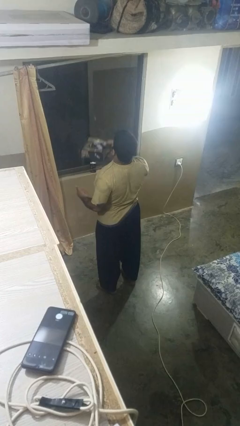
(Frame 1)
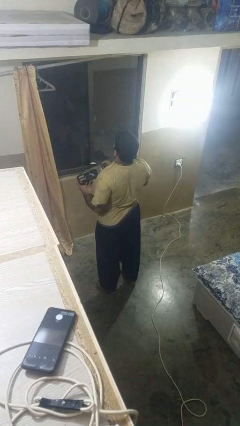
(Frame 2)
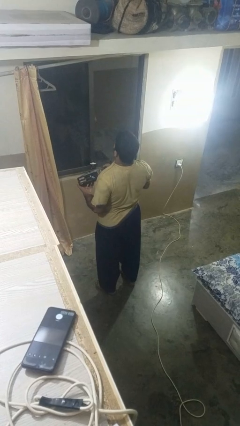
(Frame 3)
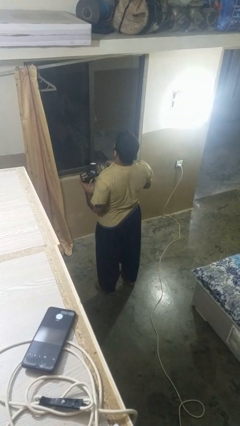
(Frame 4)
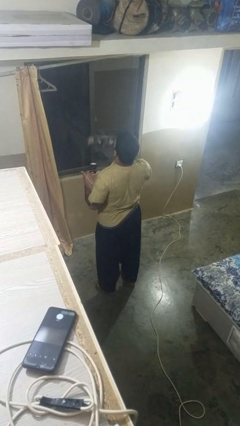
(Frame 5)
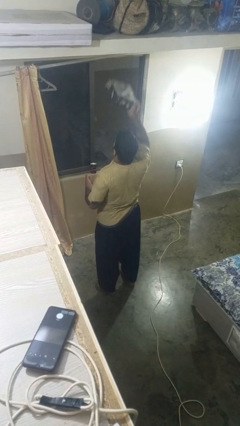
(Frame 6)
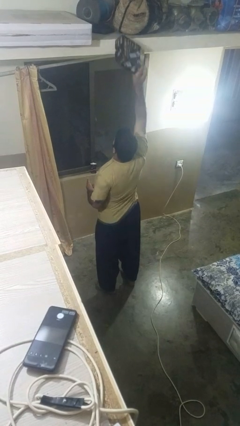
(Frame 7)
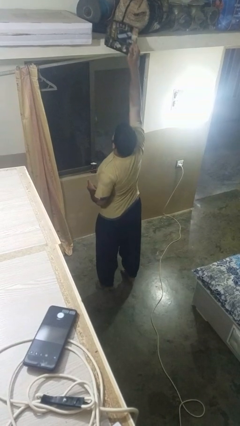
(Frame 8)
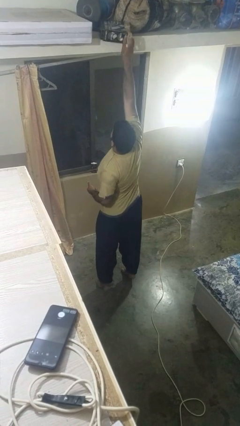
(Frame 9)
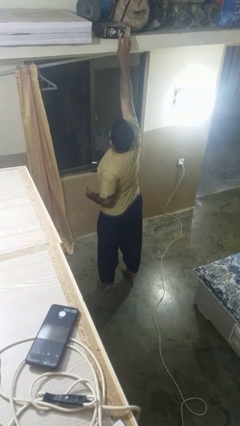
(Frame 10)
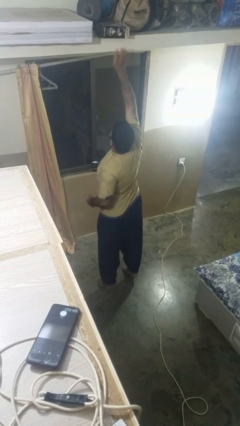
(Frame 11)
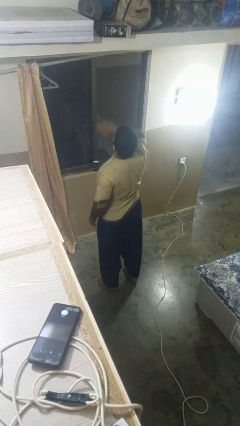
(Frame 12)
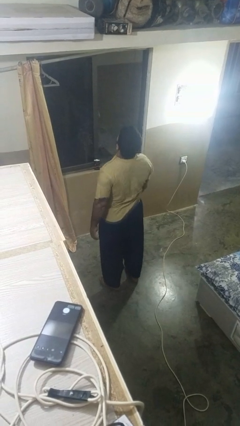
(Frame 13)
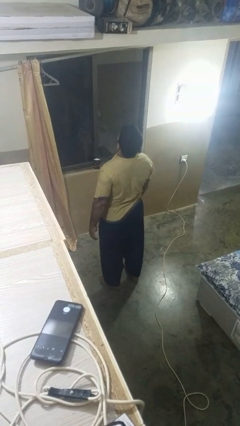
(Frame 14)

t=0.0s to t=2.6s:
person puts down object on shelf

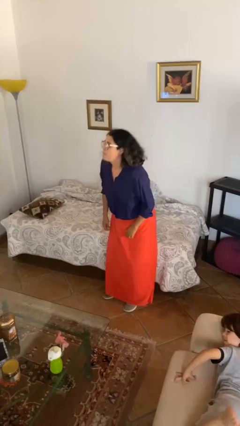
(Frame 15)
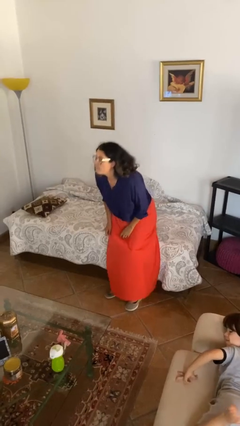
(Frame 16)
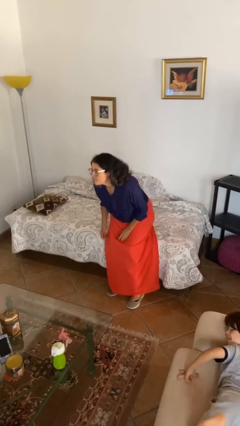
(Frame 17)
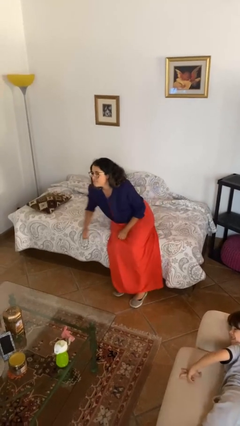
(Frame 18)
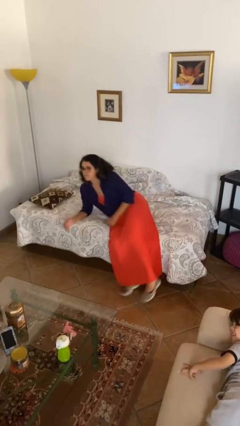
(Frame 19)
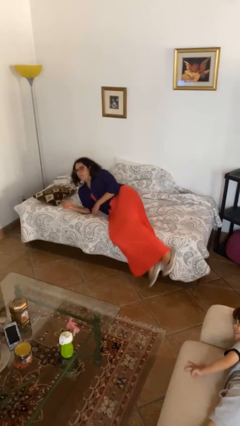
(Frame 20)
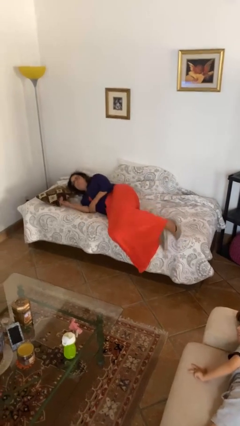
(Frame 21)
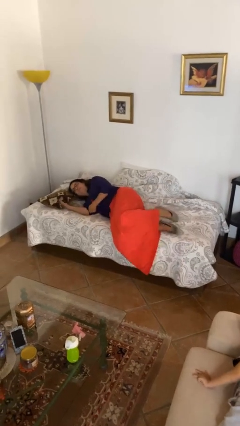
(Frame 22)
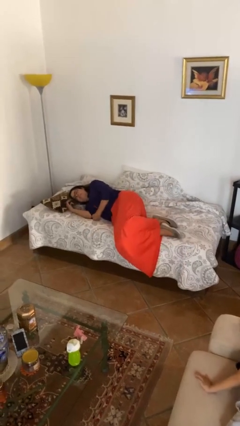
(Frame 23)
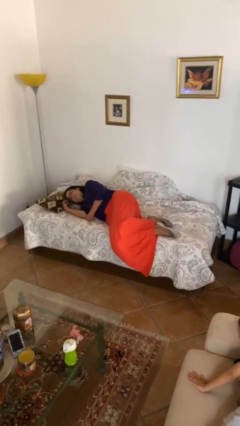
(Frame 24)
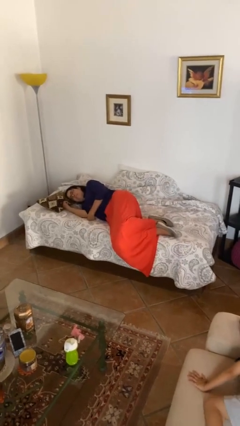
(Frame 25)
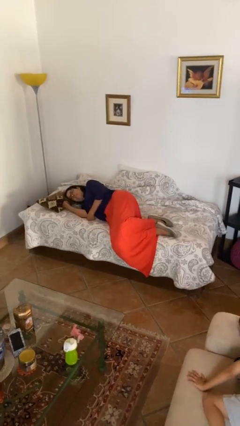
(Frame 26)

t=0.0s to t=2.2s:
person lies down on bed

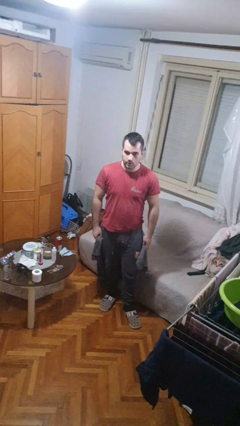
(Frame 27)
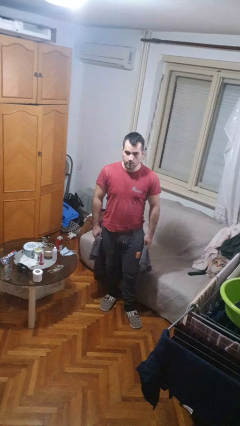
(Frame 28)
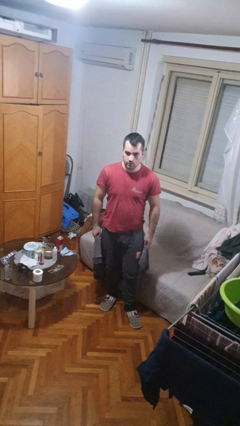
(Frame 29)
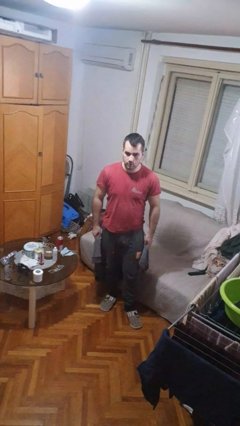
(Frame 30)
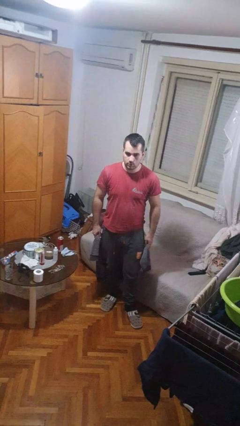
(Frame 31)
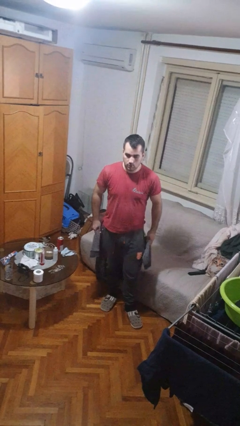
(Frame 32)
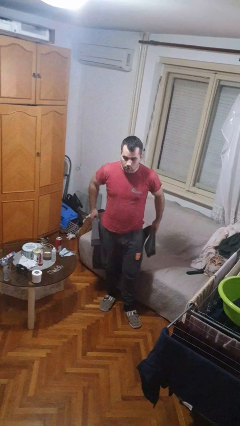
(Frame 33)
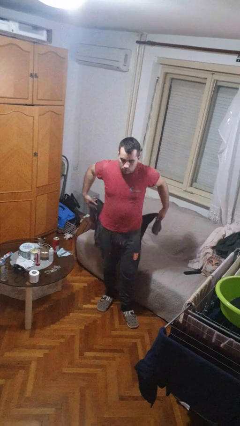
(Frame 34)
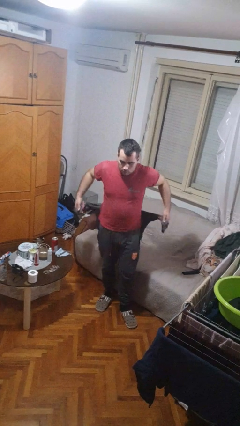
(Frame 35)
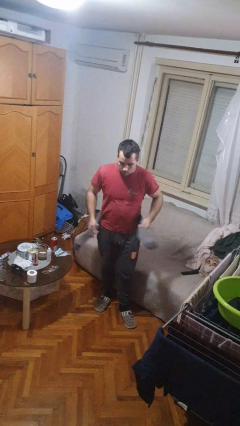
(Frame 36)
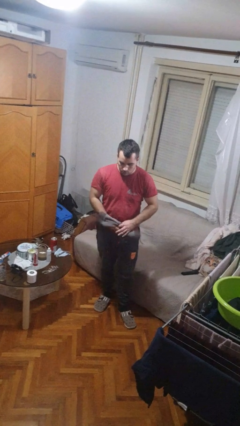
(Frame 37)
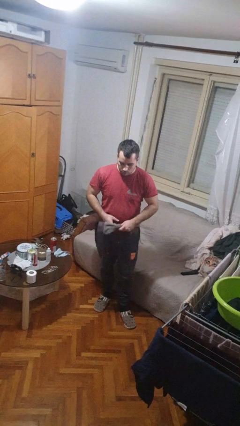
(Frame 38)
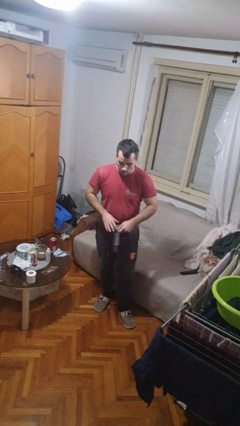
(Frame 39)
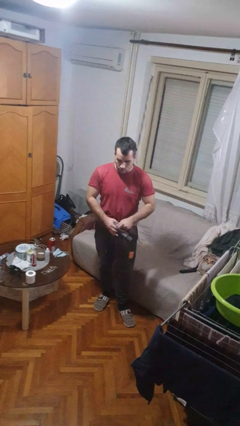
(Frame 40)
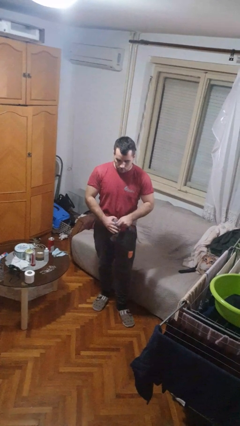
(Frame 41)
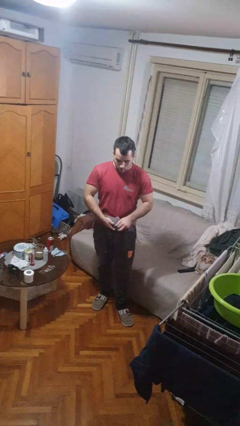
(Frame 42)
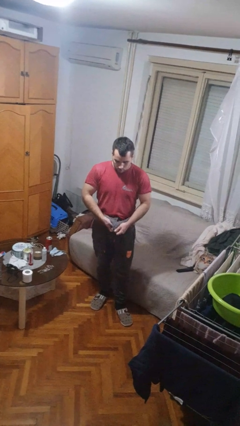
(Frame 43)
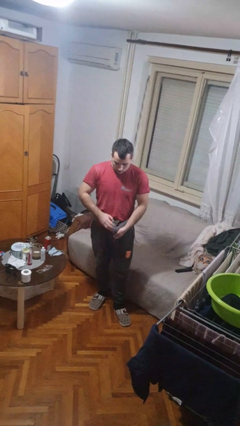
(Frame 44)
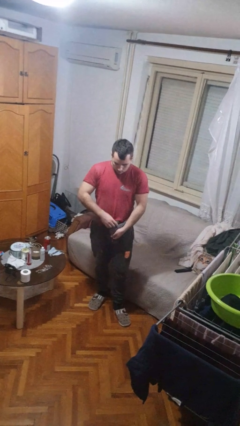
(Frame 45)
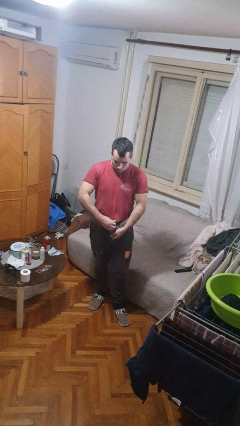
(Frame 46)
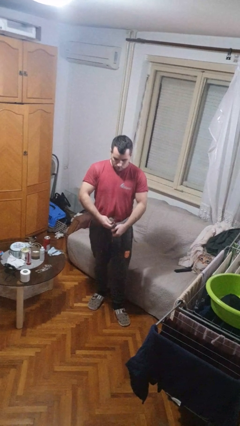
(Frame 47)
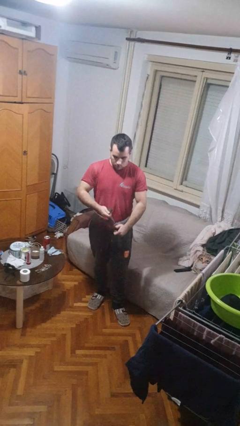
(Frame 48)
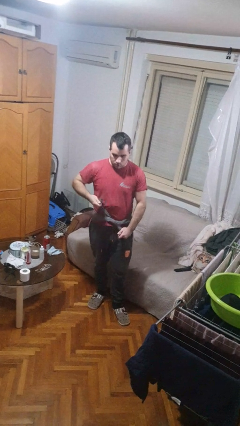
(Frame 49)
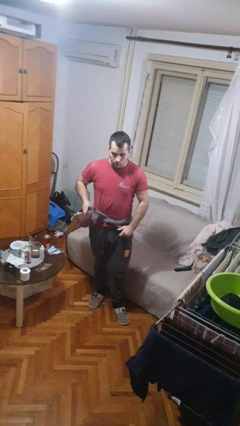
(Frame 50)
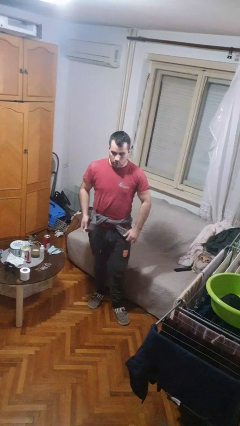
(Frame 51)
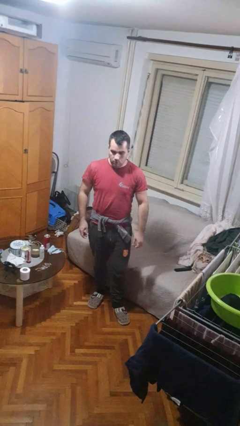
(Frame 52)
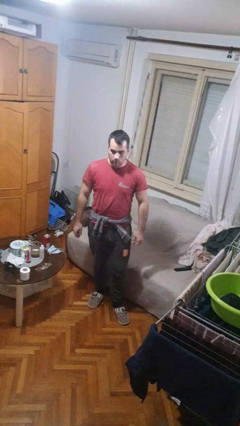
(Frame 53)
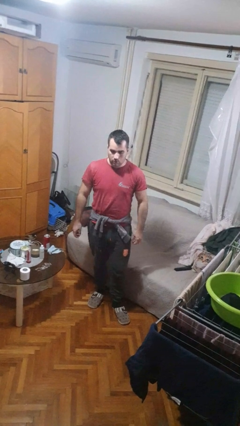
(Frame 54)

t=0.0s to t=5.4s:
person ties jacket around waist

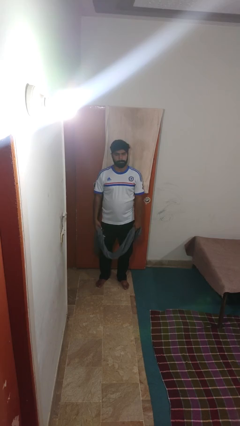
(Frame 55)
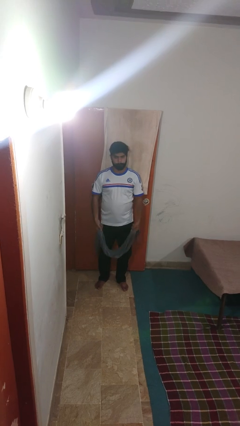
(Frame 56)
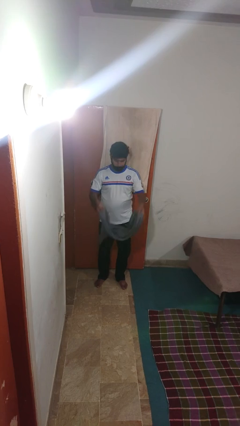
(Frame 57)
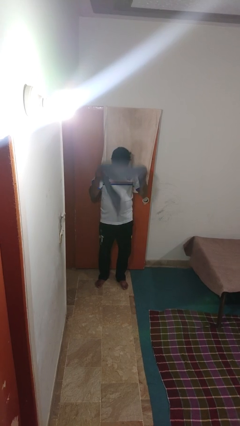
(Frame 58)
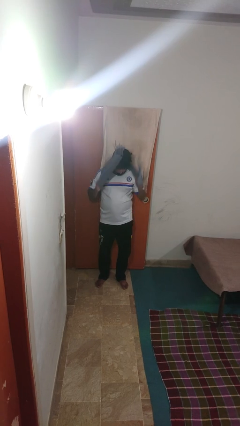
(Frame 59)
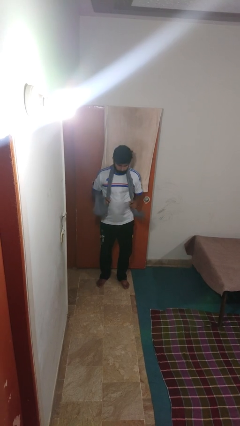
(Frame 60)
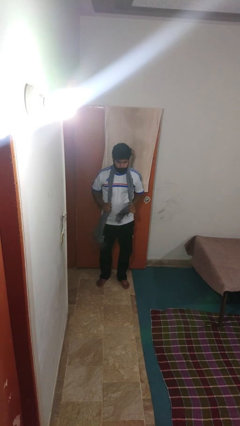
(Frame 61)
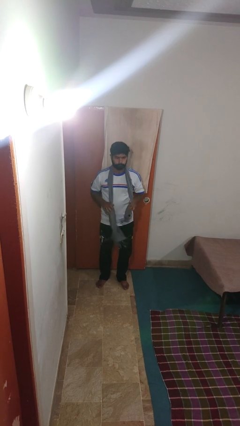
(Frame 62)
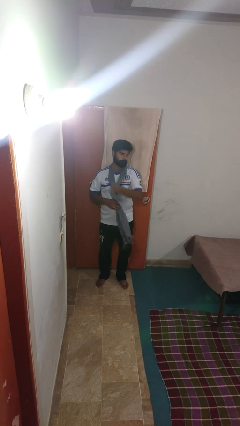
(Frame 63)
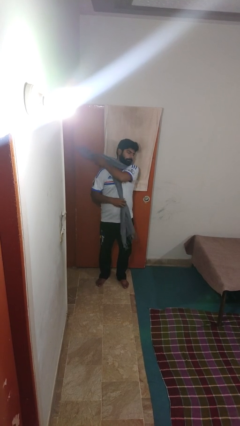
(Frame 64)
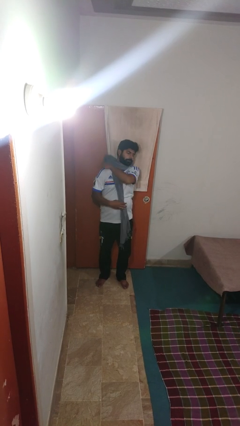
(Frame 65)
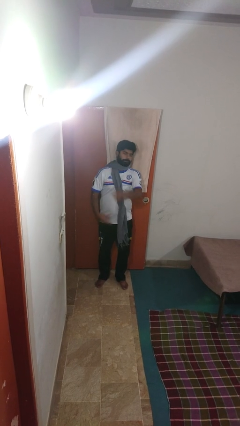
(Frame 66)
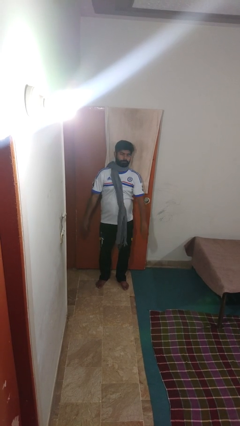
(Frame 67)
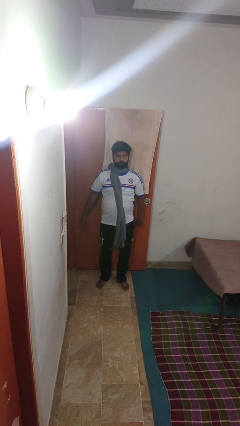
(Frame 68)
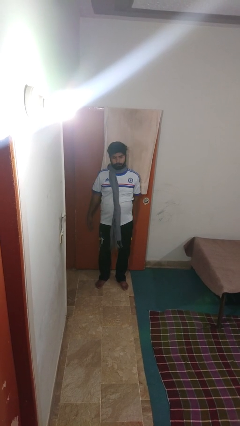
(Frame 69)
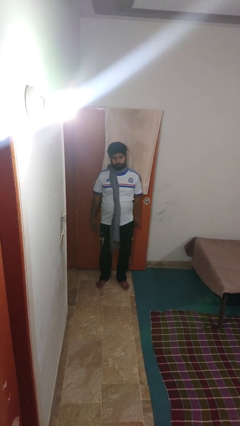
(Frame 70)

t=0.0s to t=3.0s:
person puts on scarf

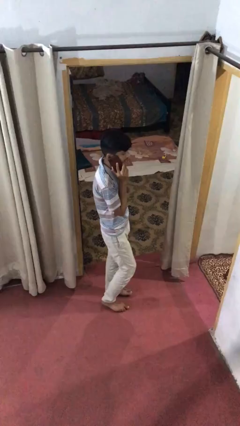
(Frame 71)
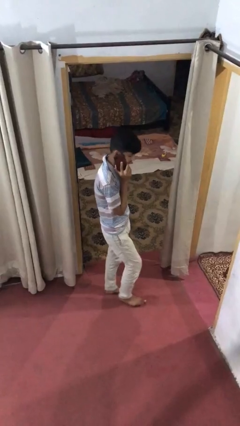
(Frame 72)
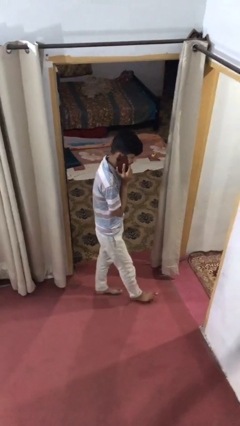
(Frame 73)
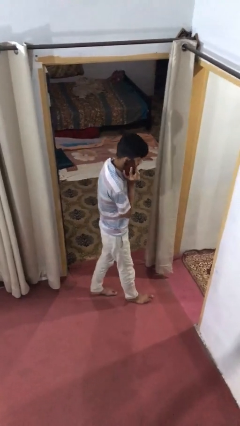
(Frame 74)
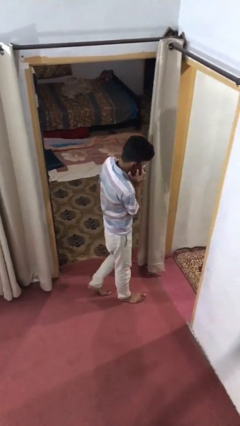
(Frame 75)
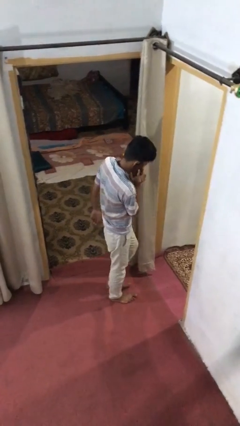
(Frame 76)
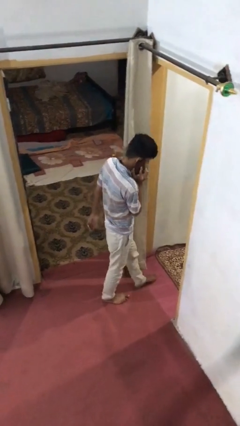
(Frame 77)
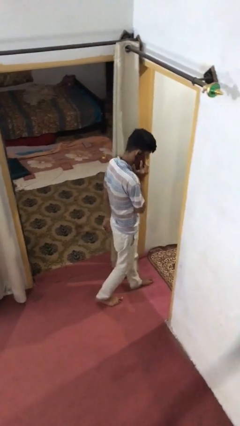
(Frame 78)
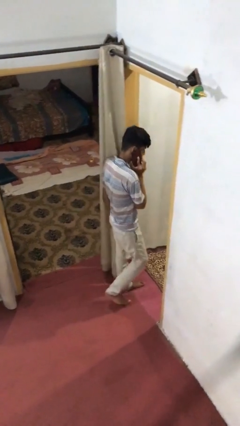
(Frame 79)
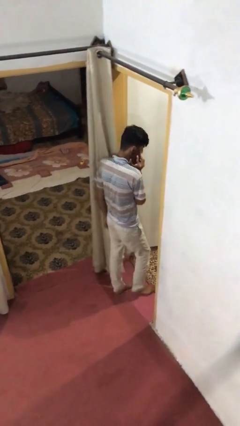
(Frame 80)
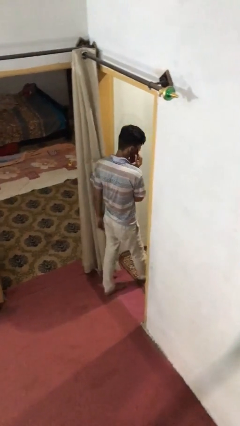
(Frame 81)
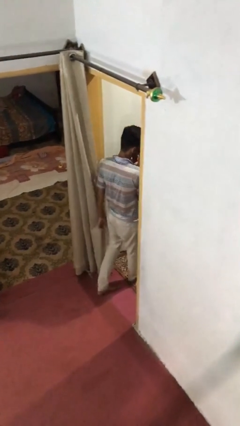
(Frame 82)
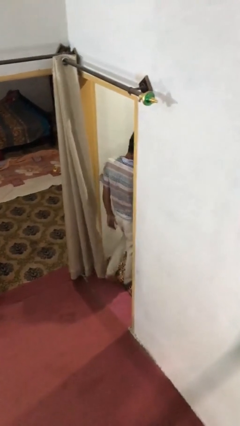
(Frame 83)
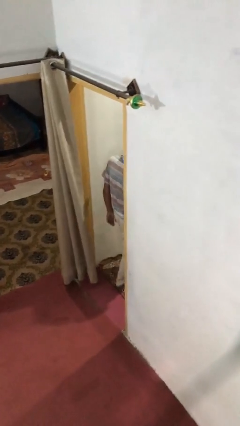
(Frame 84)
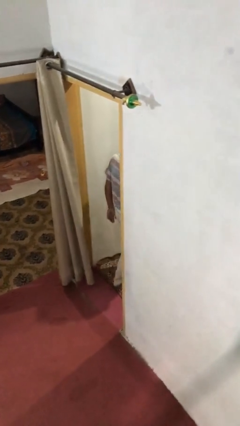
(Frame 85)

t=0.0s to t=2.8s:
person exits scene through structure

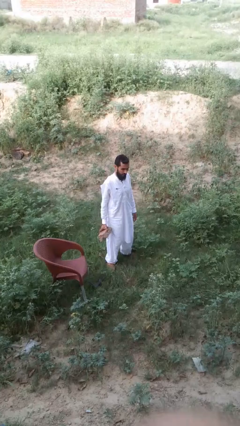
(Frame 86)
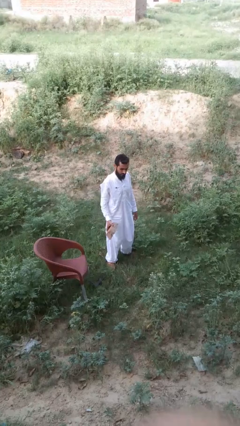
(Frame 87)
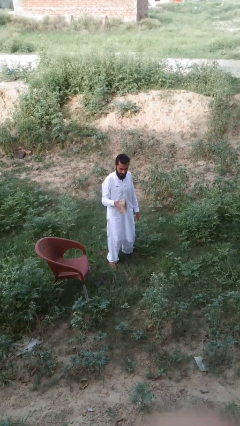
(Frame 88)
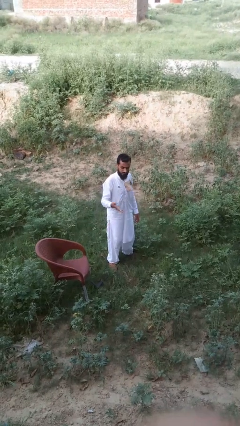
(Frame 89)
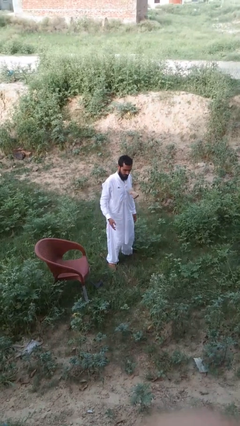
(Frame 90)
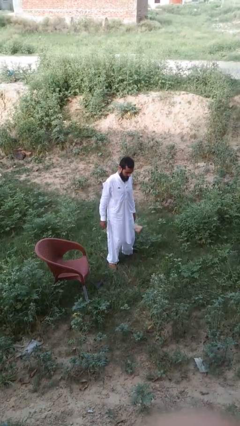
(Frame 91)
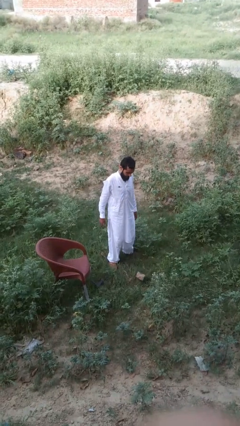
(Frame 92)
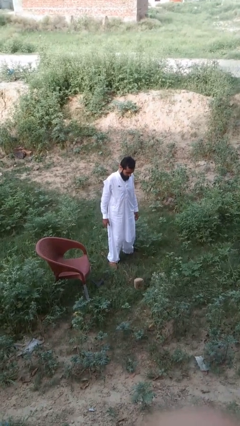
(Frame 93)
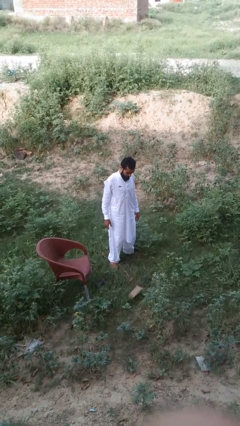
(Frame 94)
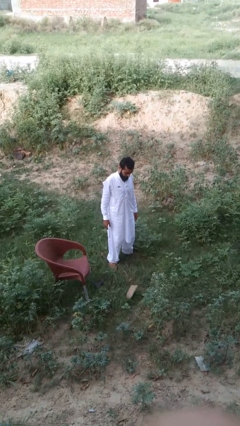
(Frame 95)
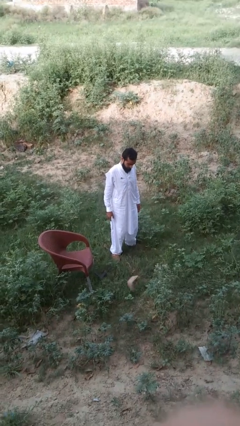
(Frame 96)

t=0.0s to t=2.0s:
person throws object to ground
